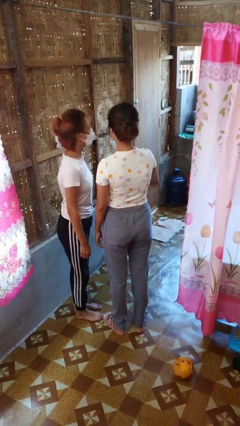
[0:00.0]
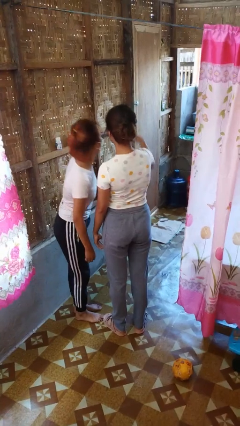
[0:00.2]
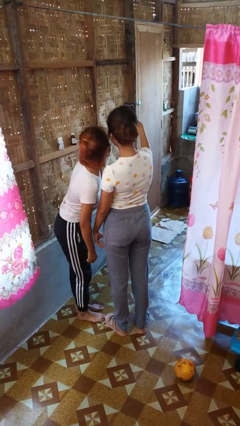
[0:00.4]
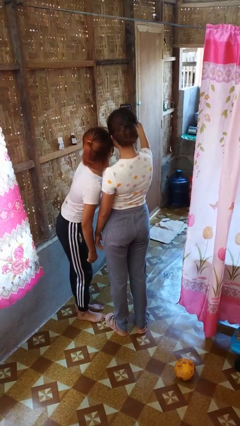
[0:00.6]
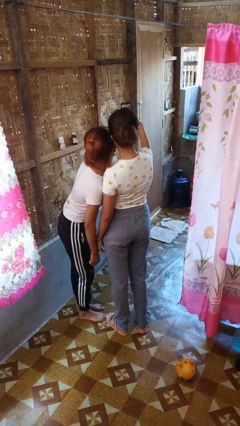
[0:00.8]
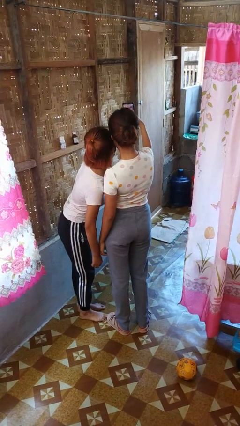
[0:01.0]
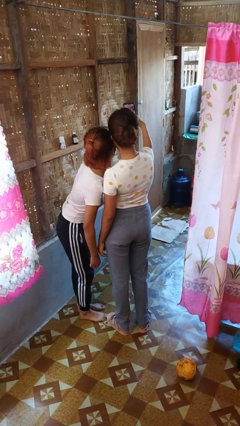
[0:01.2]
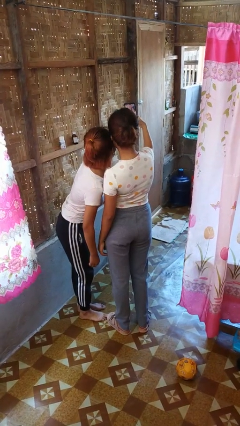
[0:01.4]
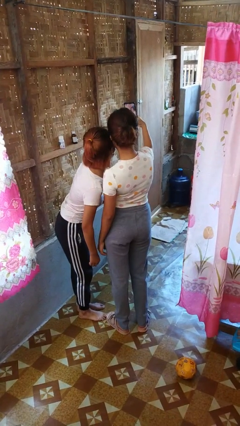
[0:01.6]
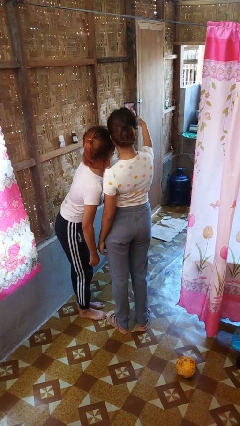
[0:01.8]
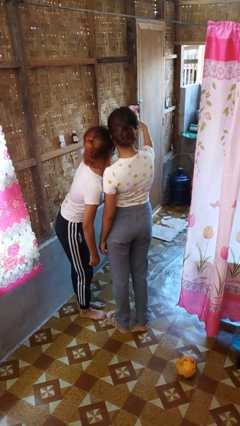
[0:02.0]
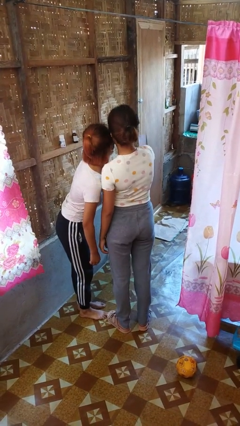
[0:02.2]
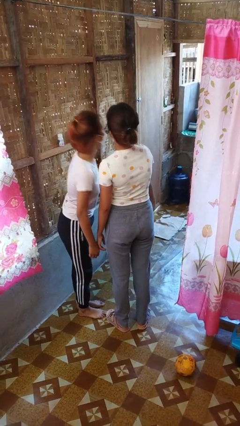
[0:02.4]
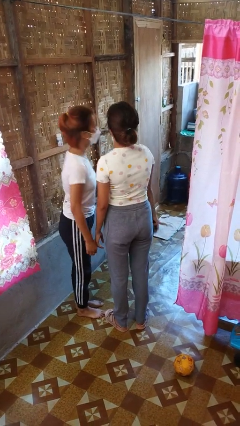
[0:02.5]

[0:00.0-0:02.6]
person takes selfie with person

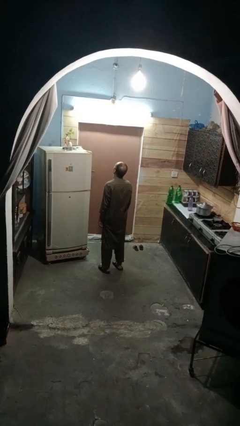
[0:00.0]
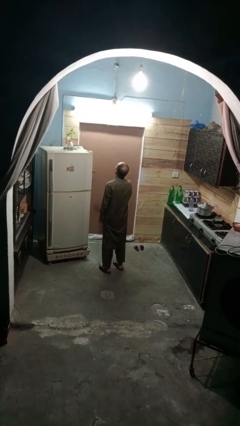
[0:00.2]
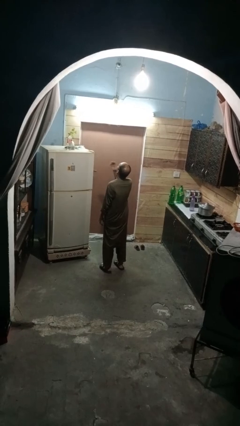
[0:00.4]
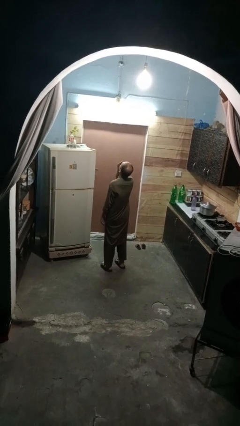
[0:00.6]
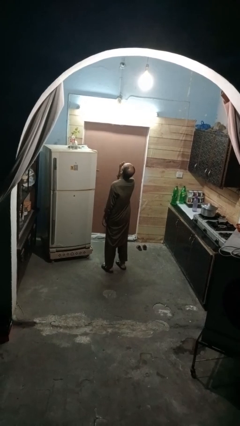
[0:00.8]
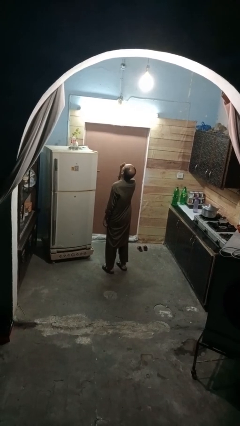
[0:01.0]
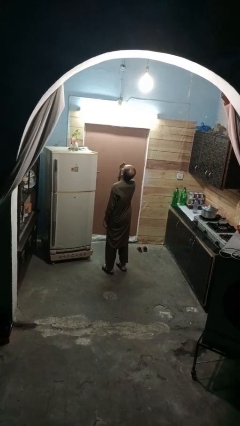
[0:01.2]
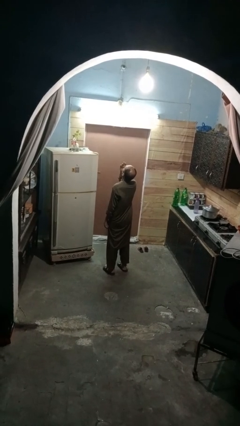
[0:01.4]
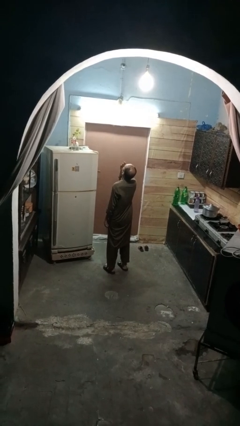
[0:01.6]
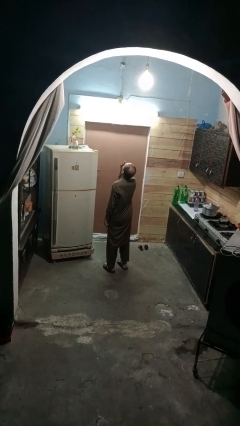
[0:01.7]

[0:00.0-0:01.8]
person yawns

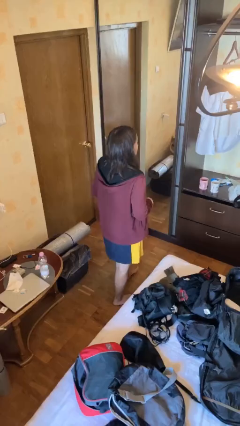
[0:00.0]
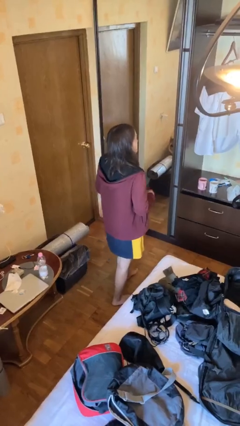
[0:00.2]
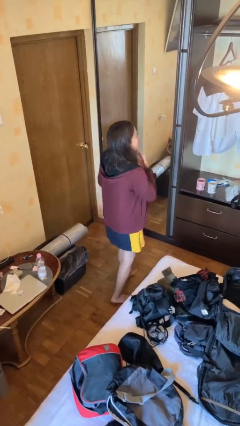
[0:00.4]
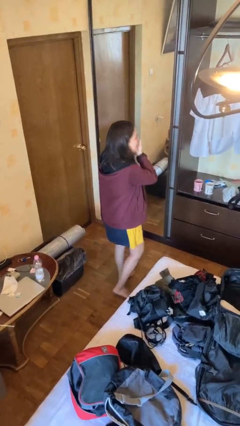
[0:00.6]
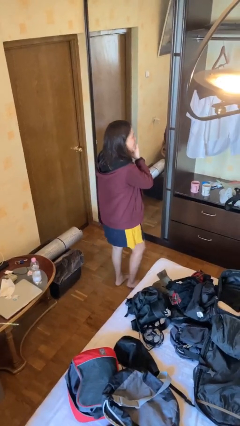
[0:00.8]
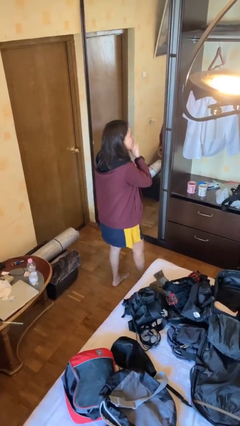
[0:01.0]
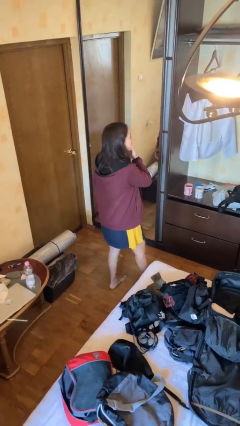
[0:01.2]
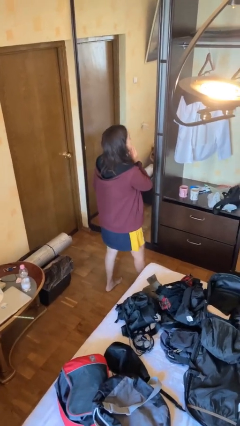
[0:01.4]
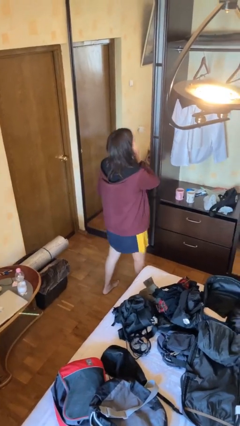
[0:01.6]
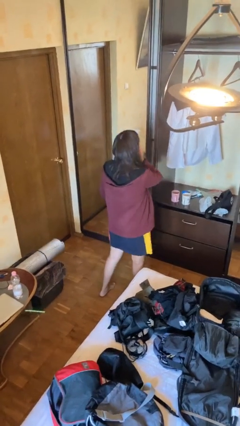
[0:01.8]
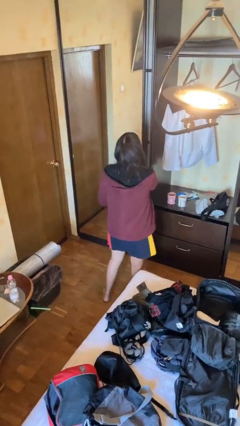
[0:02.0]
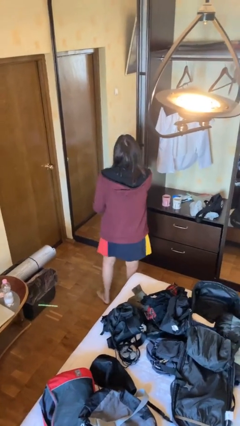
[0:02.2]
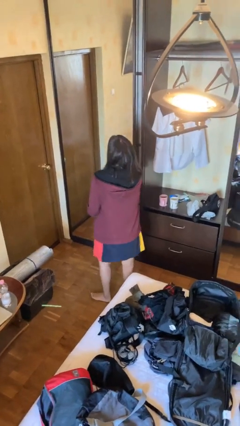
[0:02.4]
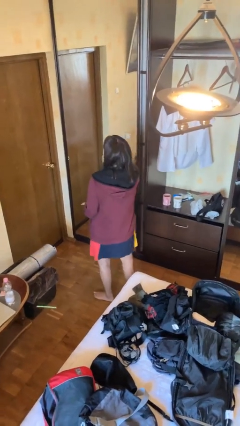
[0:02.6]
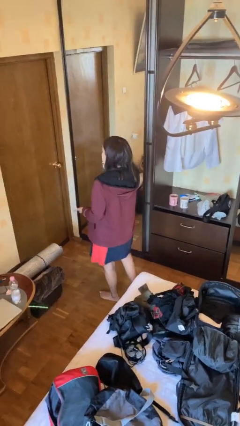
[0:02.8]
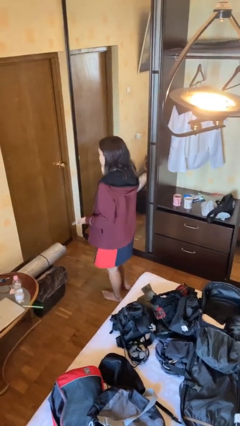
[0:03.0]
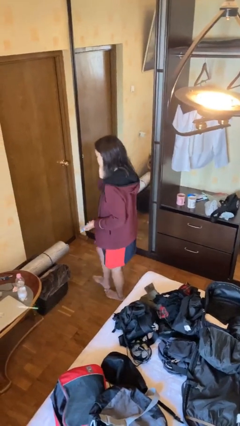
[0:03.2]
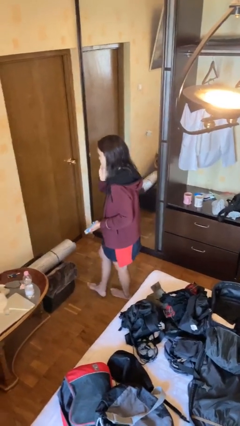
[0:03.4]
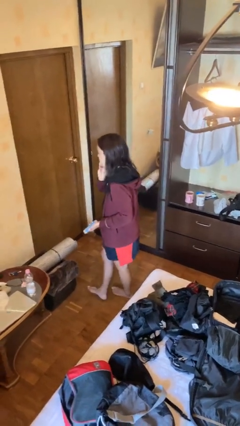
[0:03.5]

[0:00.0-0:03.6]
person scratches face

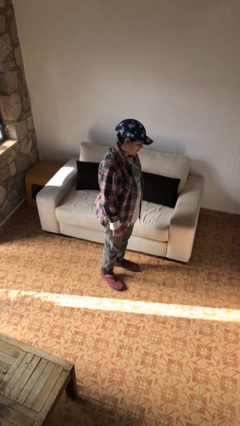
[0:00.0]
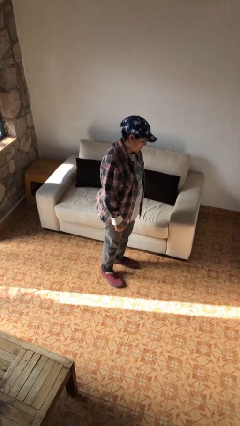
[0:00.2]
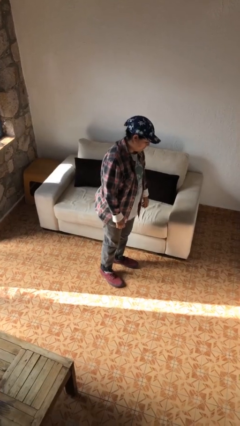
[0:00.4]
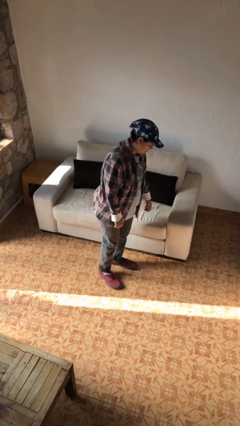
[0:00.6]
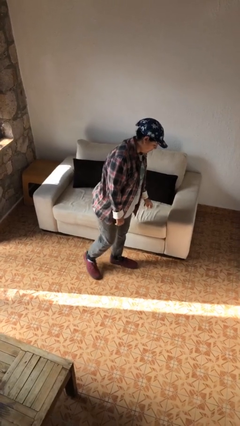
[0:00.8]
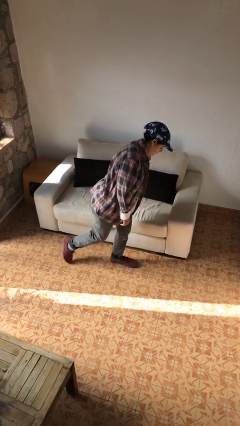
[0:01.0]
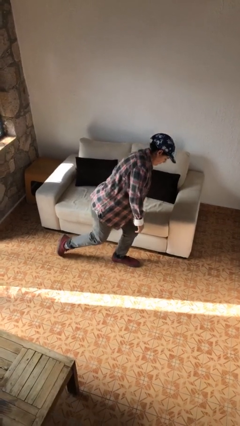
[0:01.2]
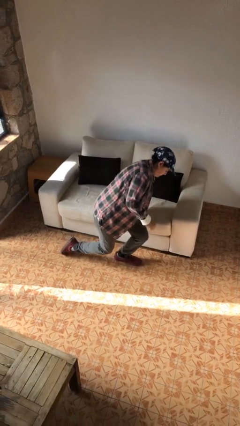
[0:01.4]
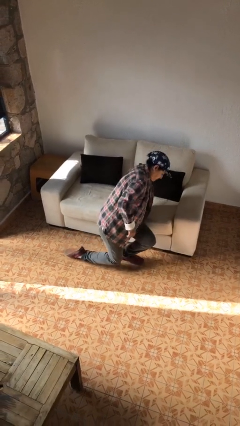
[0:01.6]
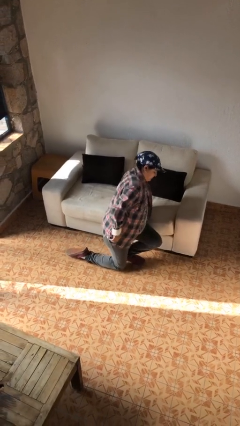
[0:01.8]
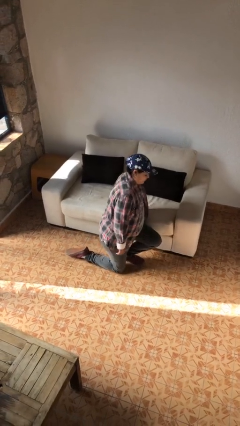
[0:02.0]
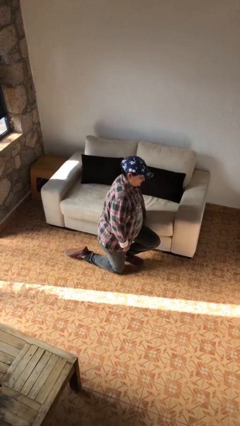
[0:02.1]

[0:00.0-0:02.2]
person kneels

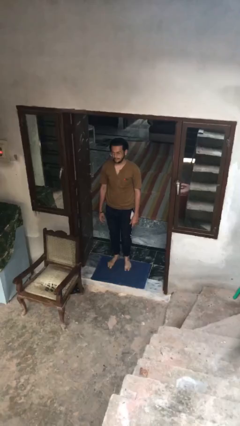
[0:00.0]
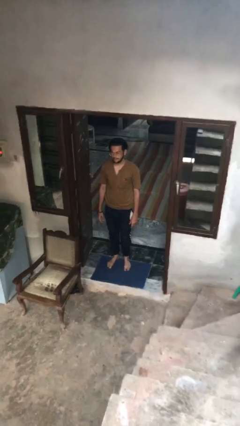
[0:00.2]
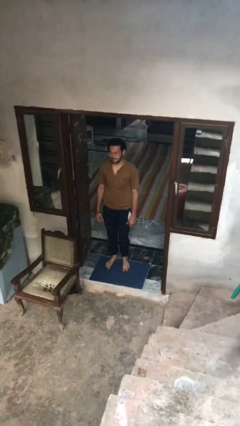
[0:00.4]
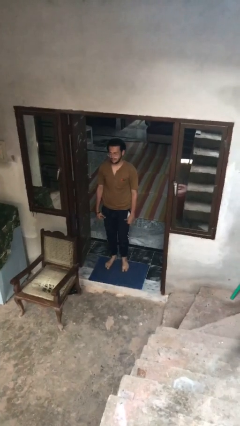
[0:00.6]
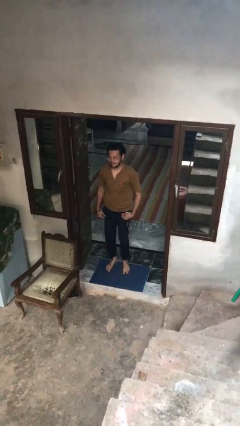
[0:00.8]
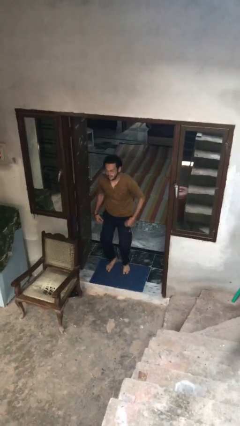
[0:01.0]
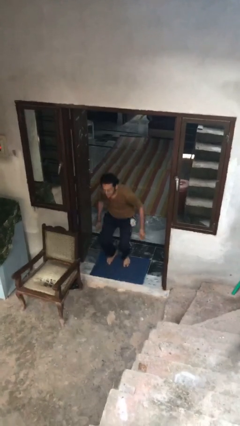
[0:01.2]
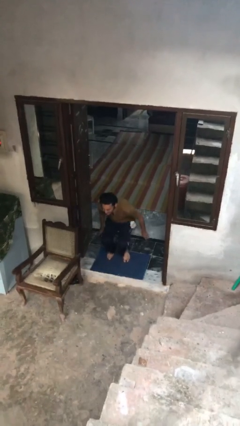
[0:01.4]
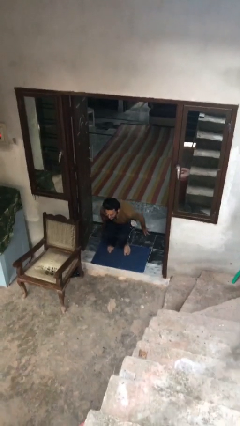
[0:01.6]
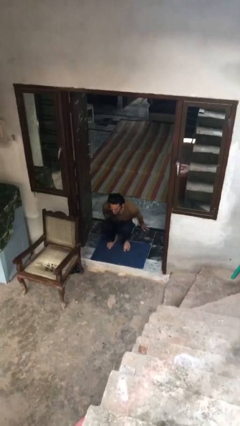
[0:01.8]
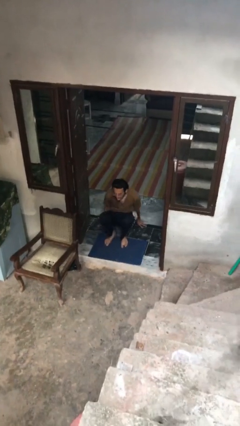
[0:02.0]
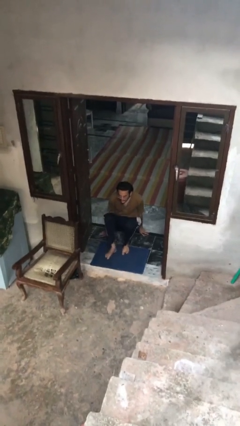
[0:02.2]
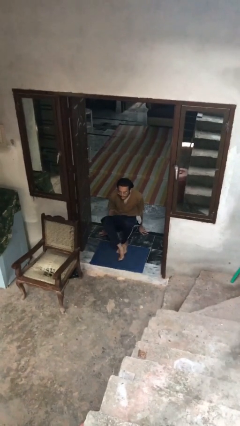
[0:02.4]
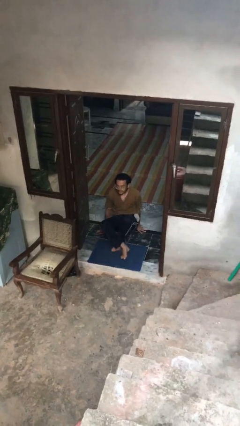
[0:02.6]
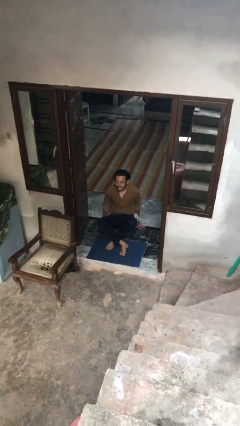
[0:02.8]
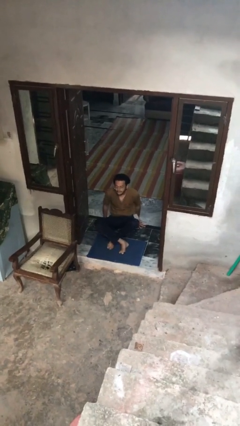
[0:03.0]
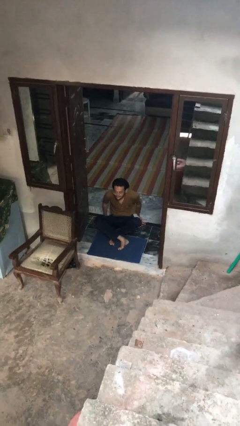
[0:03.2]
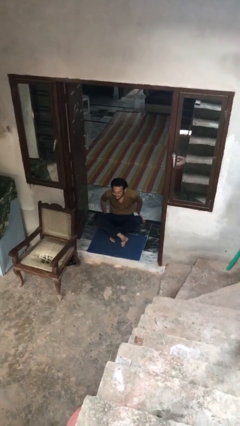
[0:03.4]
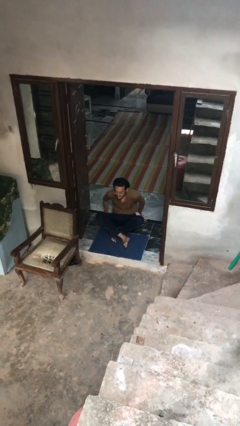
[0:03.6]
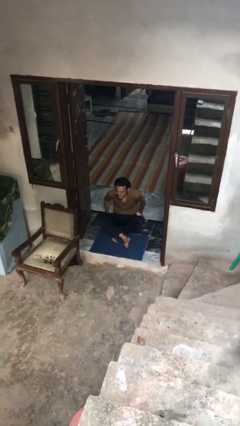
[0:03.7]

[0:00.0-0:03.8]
person sits crisscross

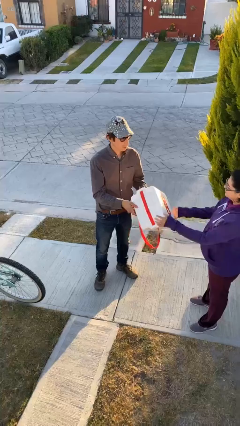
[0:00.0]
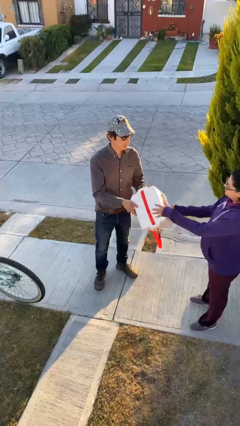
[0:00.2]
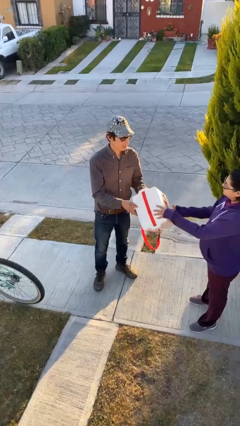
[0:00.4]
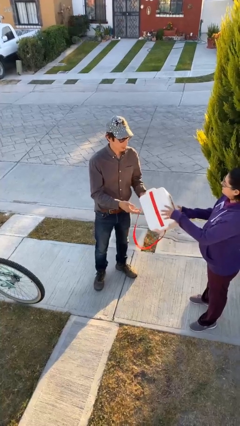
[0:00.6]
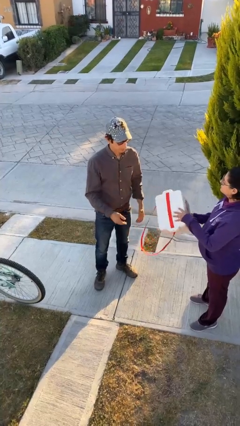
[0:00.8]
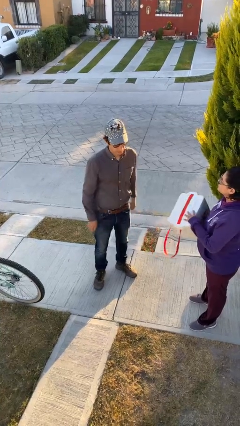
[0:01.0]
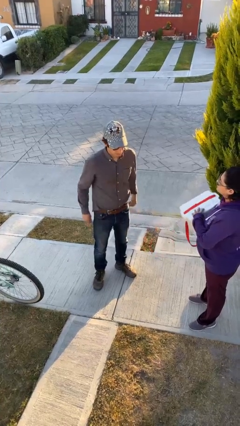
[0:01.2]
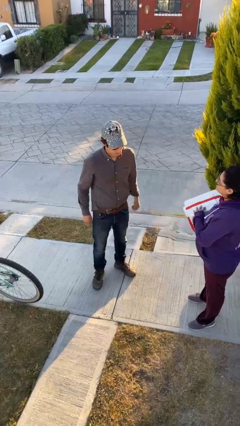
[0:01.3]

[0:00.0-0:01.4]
person transfers object to person

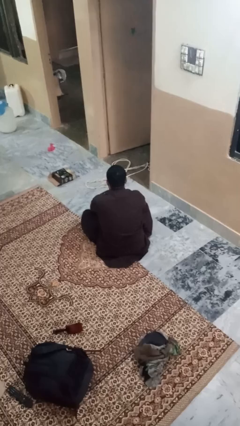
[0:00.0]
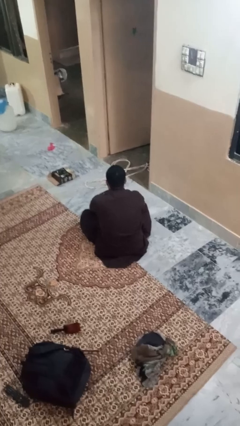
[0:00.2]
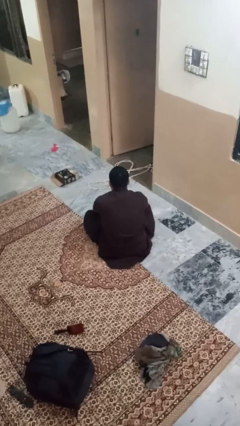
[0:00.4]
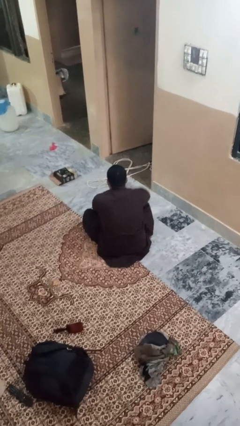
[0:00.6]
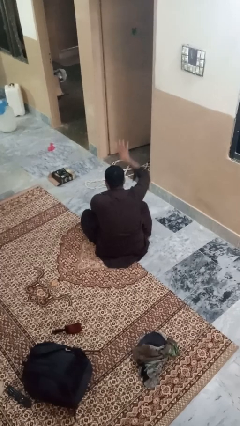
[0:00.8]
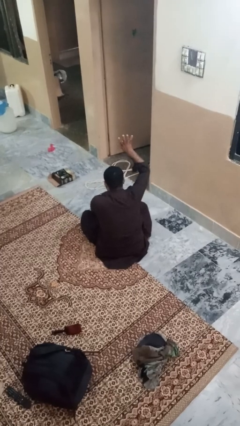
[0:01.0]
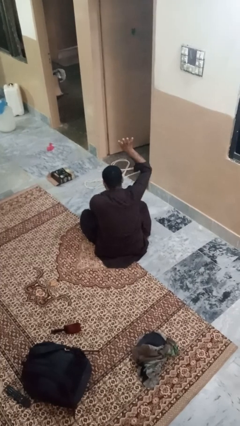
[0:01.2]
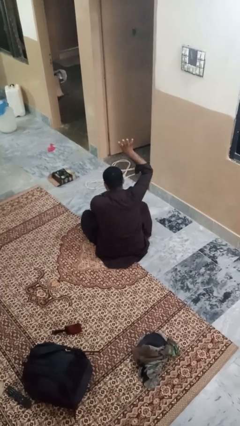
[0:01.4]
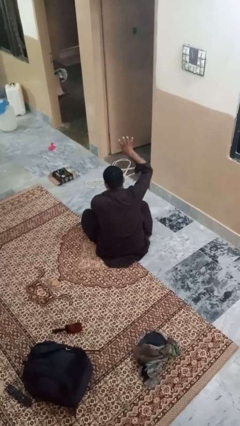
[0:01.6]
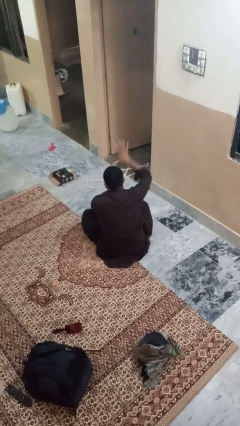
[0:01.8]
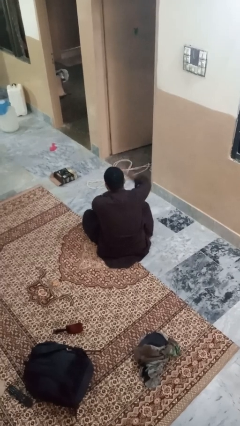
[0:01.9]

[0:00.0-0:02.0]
person gestures number four
